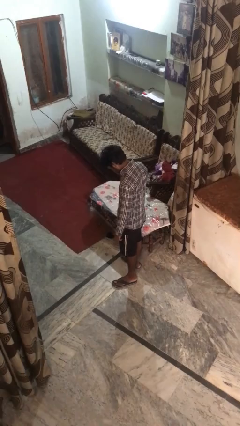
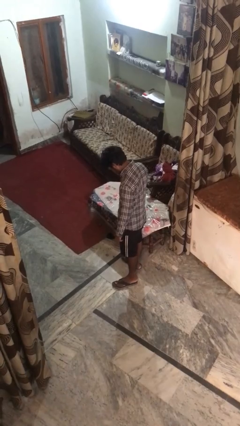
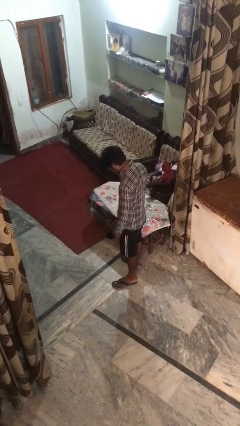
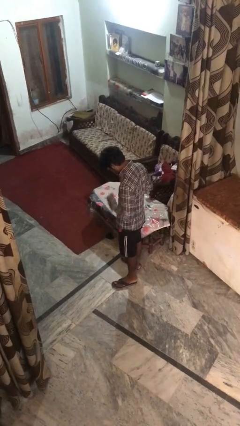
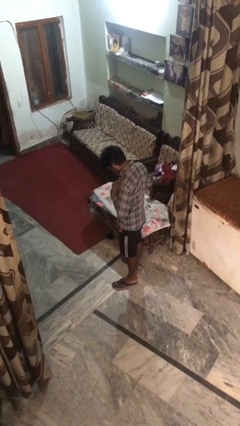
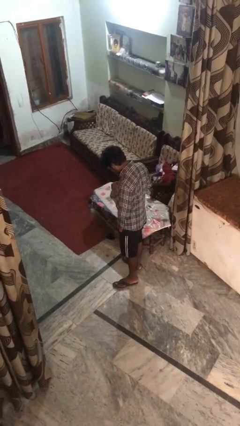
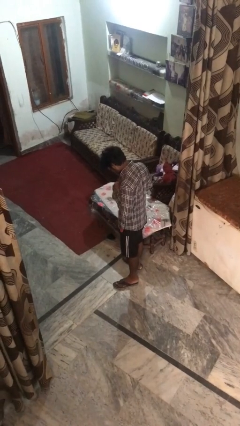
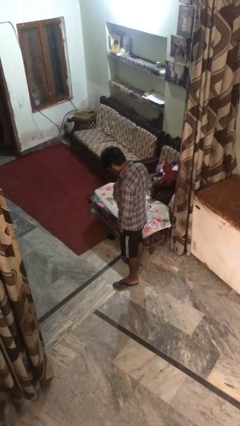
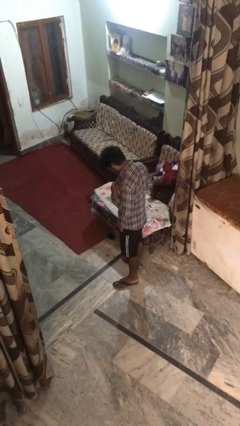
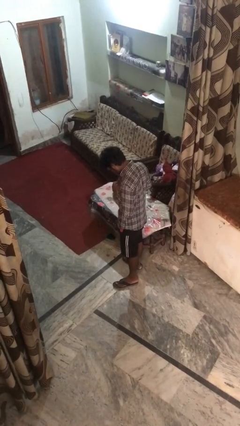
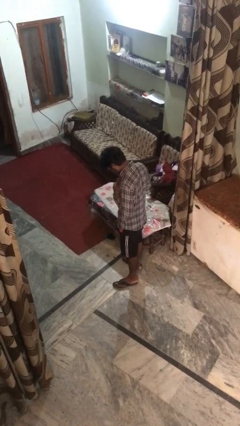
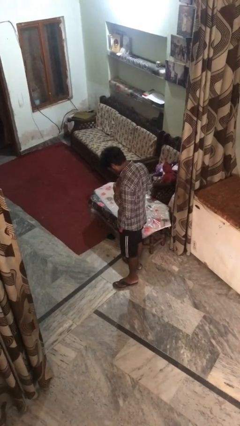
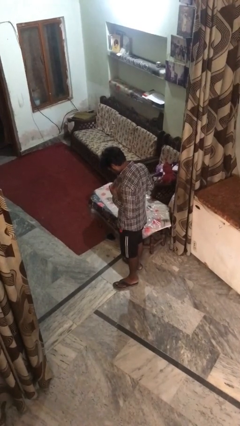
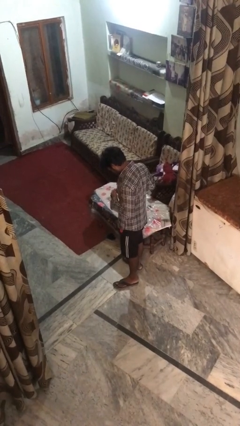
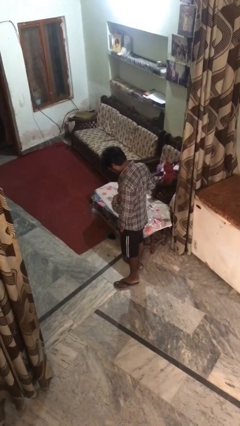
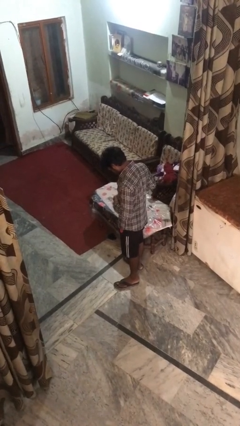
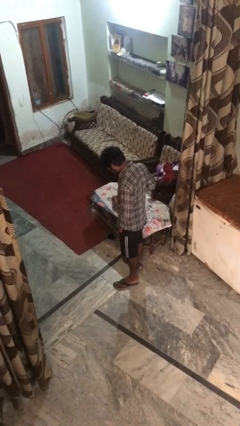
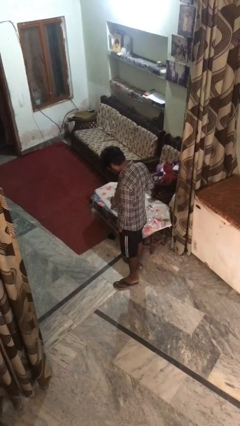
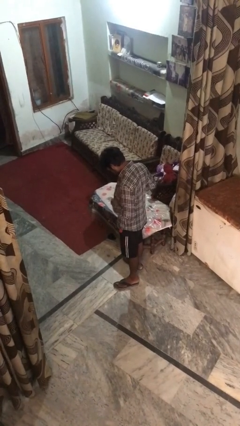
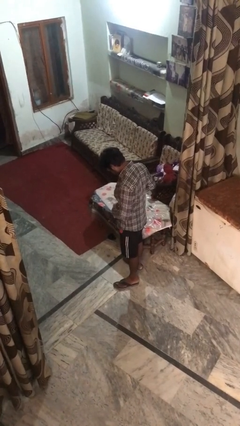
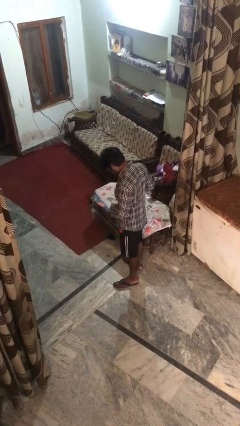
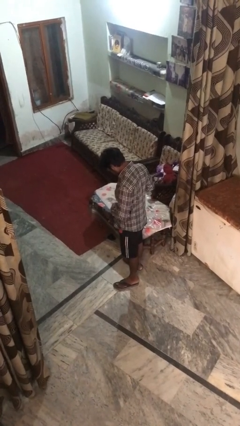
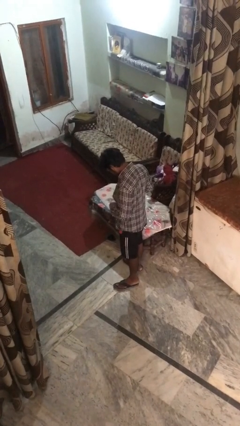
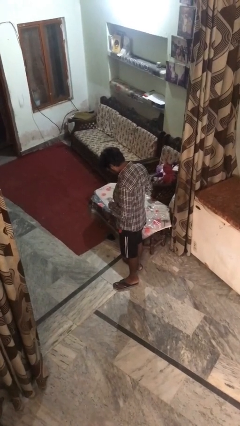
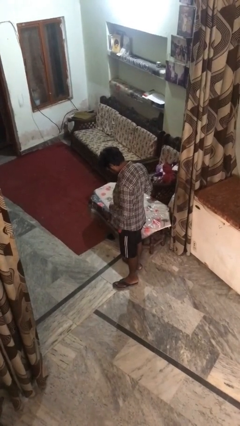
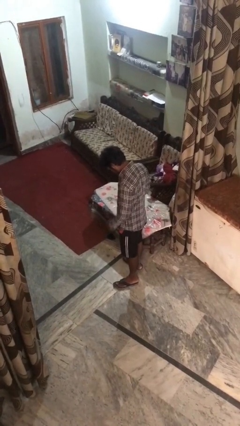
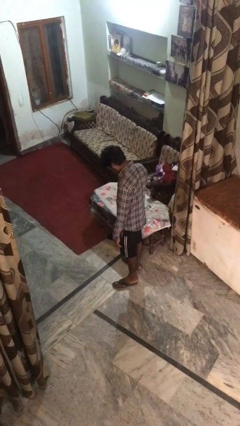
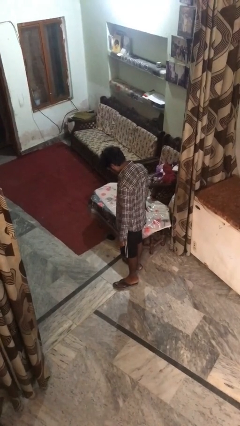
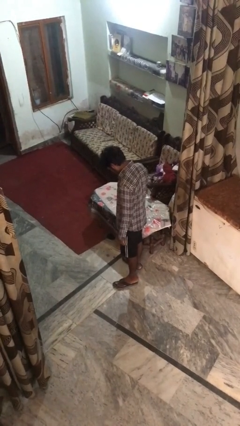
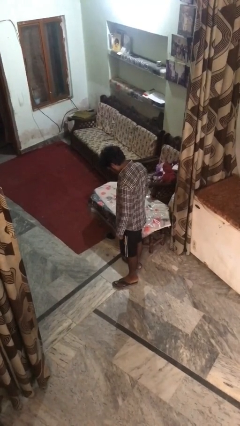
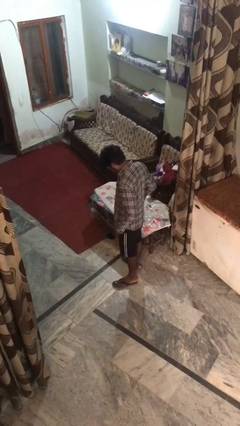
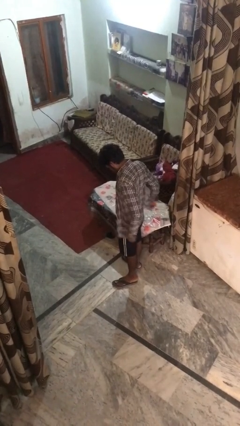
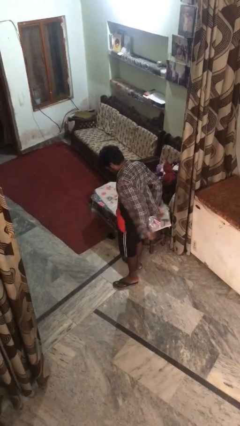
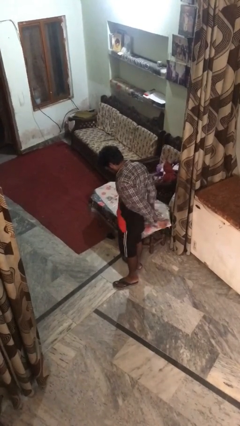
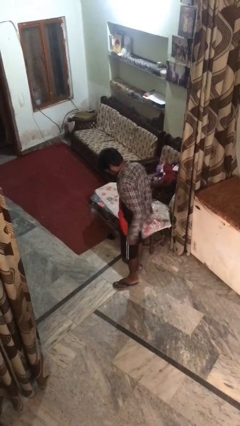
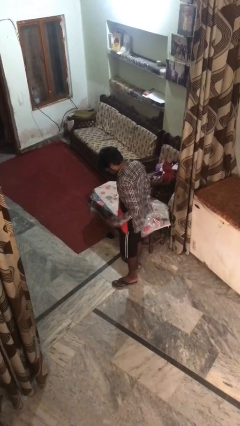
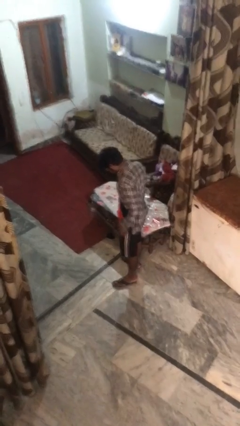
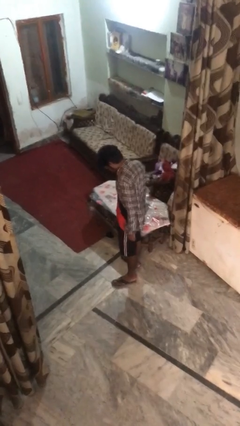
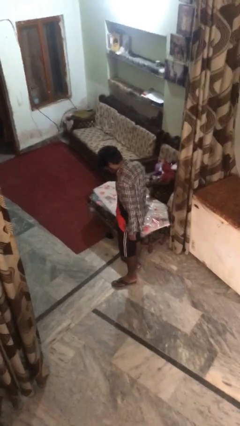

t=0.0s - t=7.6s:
person unbuttons shirt

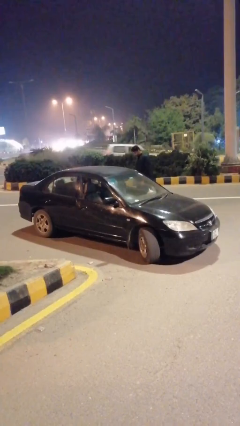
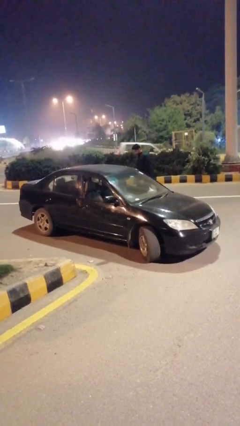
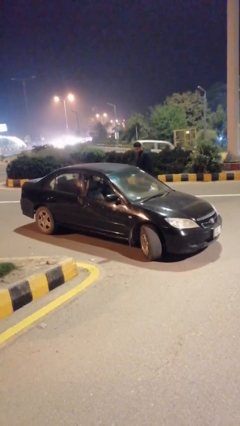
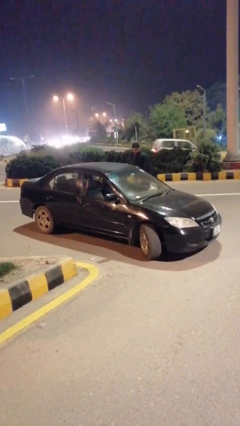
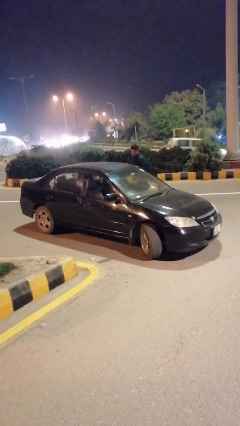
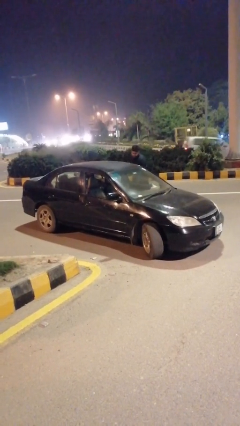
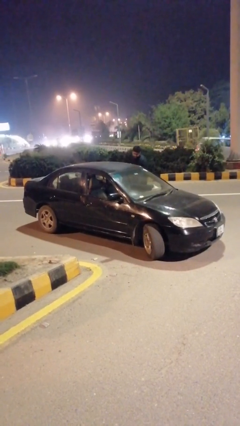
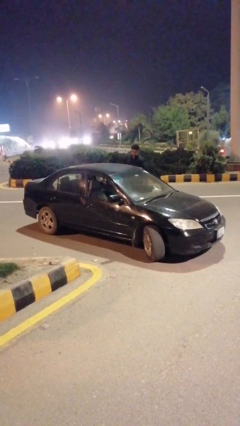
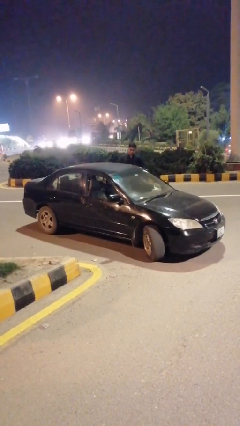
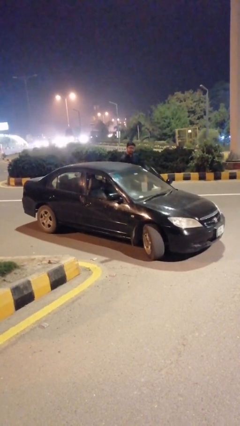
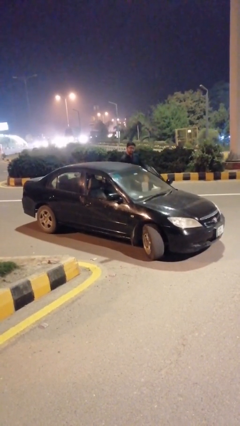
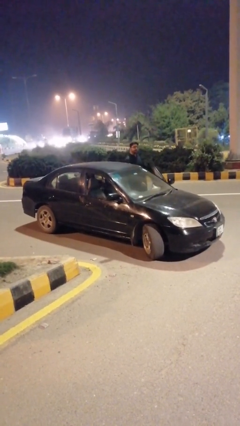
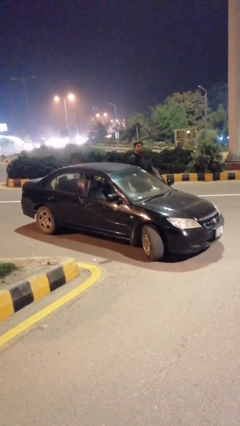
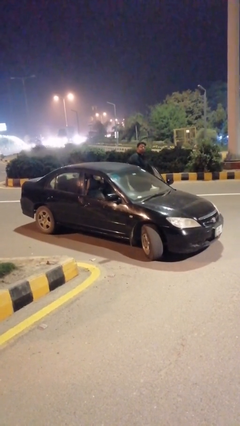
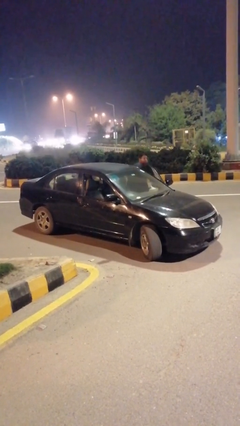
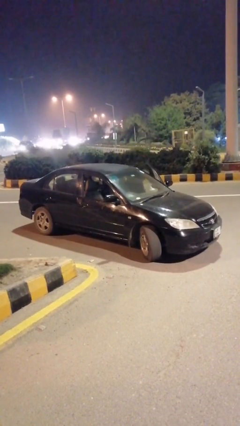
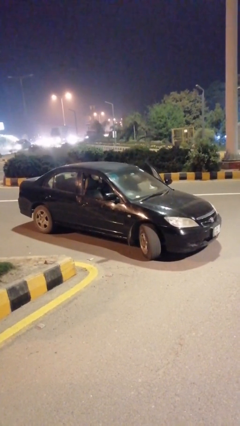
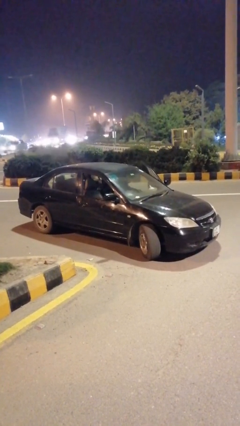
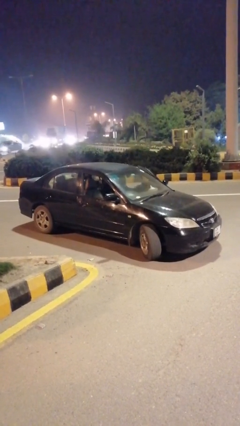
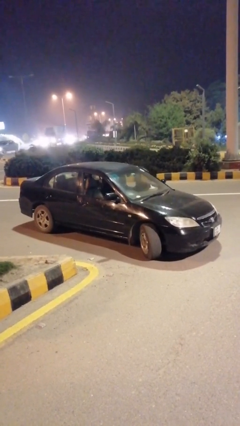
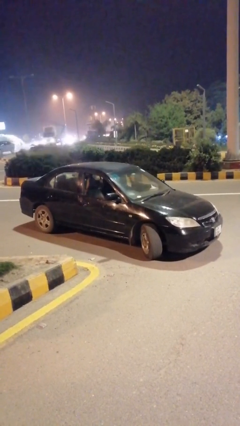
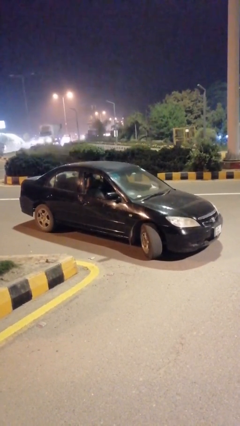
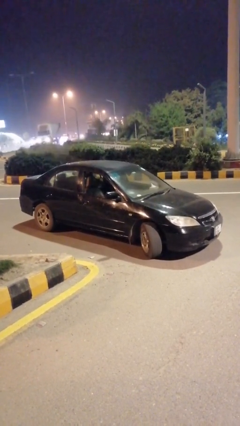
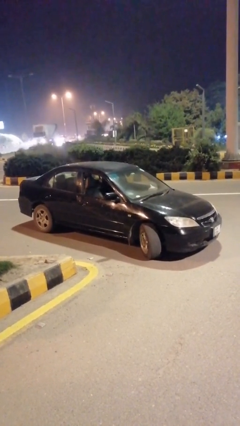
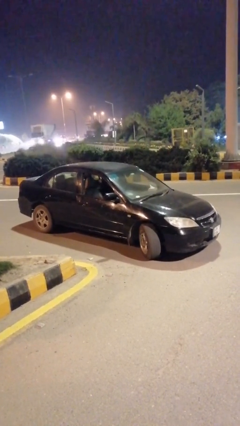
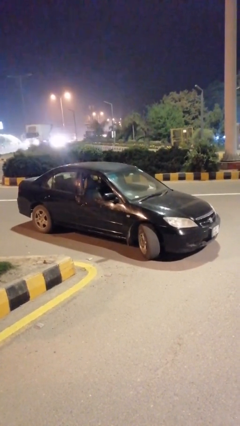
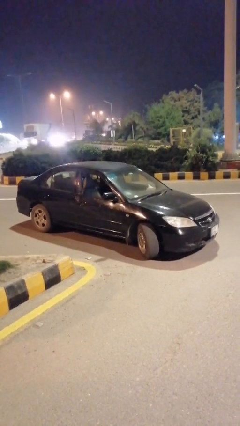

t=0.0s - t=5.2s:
car picks up person

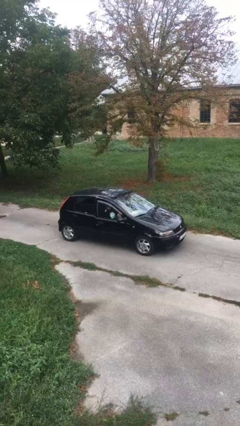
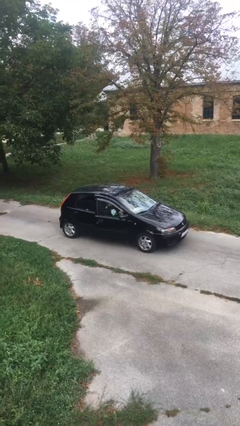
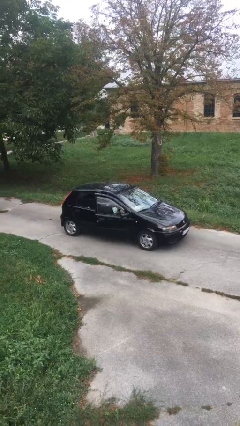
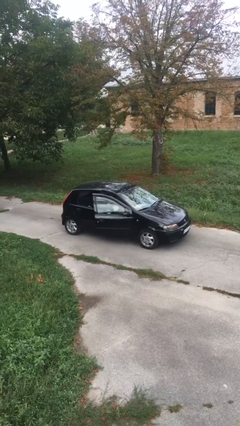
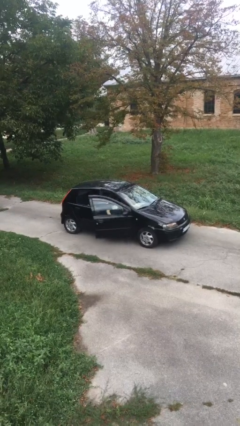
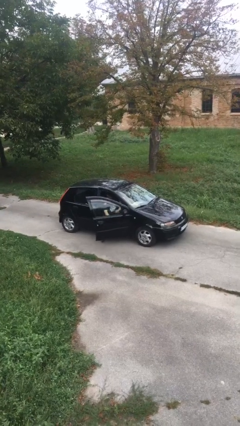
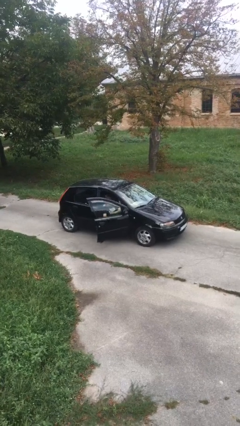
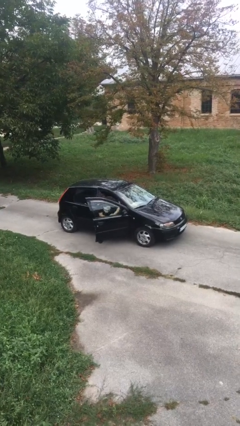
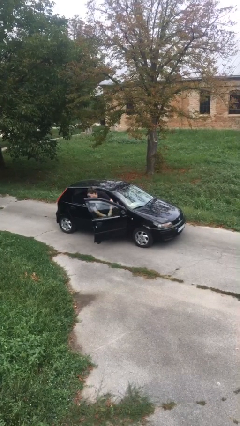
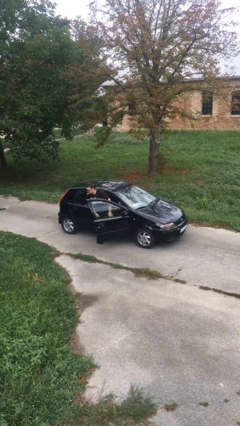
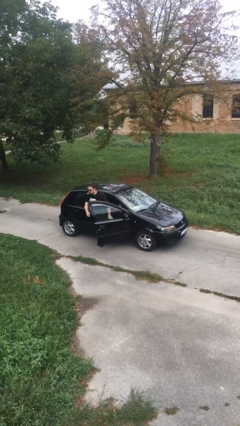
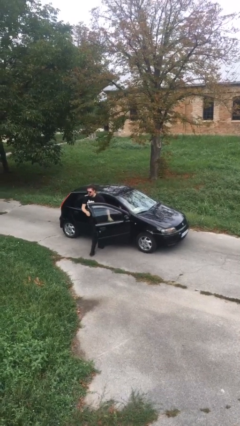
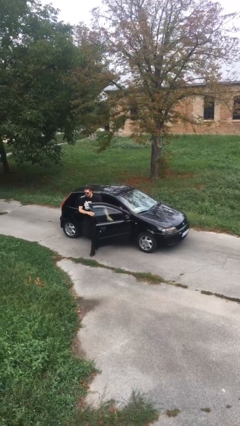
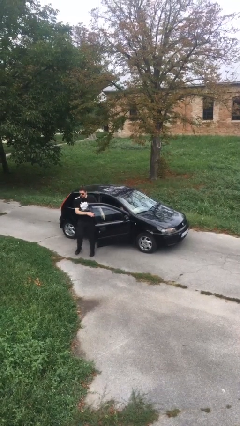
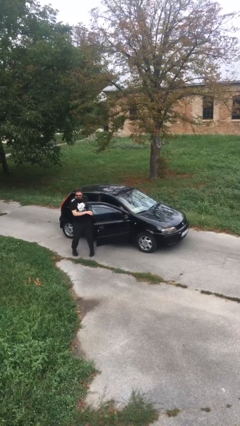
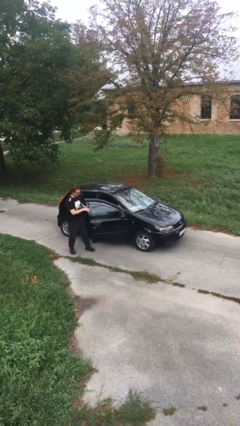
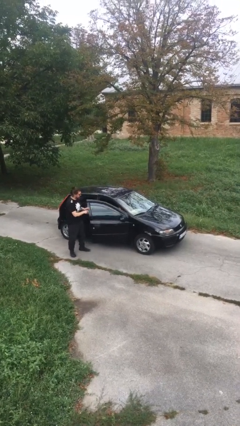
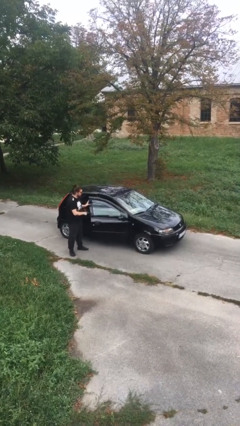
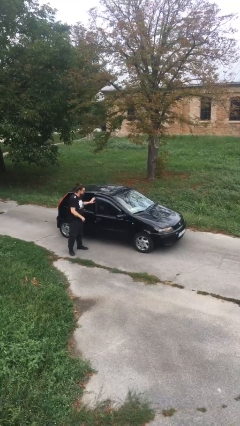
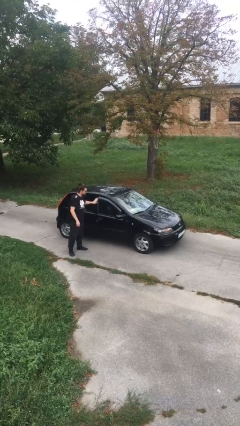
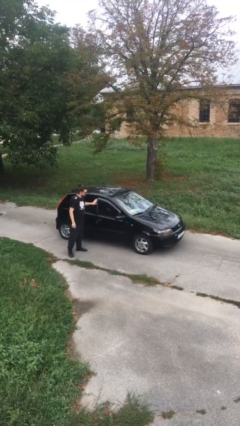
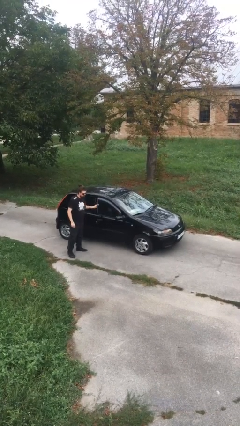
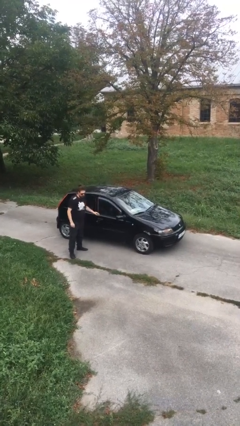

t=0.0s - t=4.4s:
car drops off person

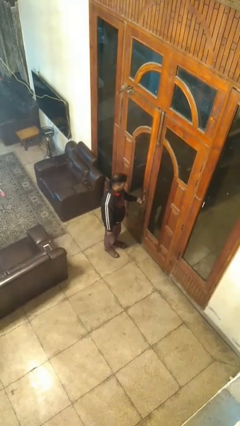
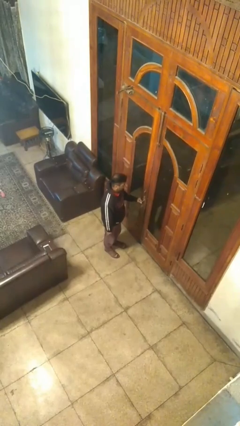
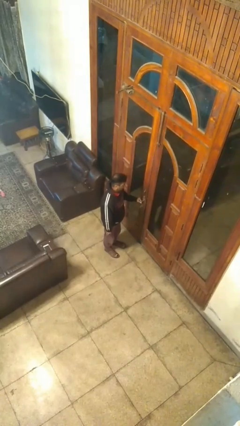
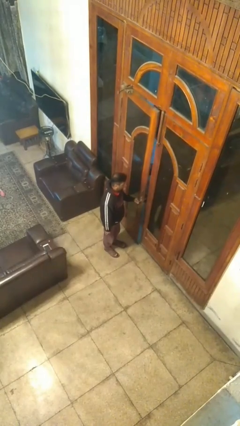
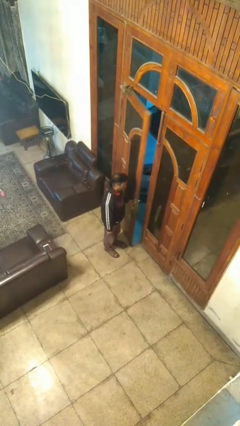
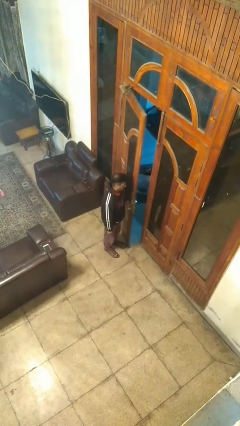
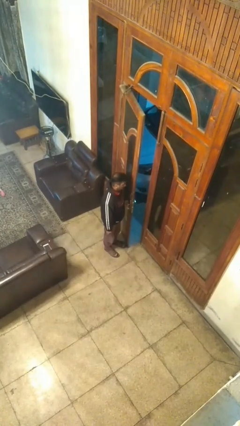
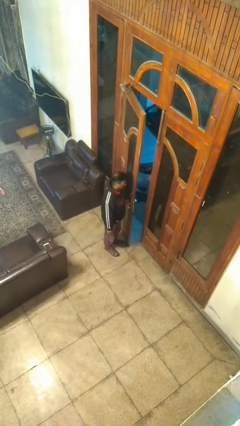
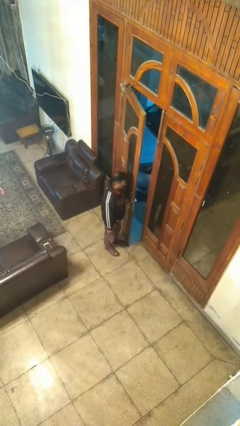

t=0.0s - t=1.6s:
person opens facility door
